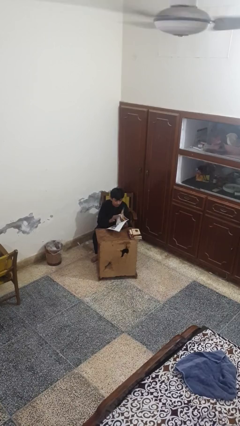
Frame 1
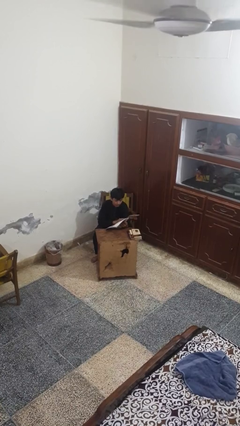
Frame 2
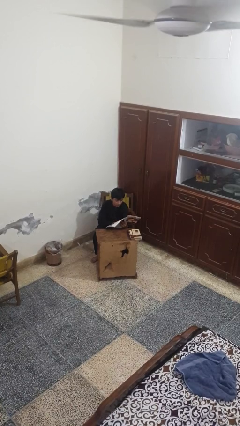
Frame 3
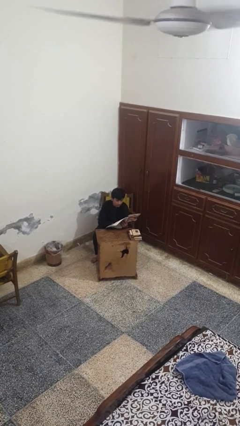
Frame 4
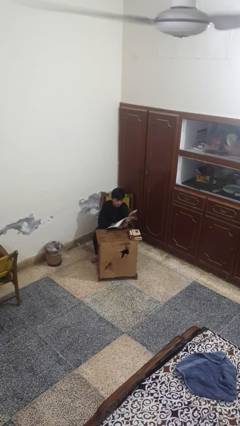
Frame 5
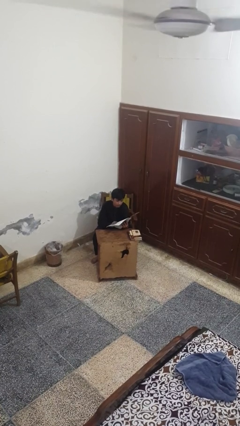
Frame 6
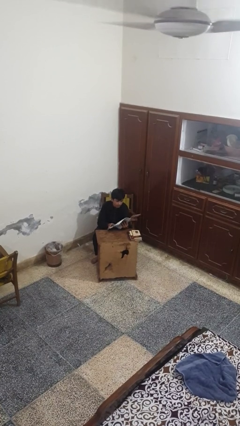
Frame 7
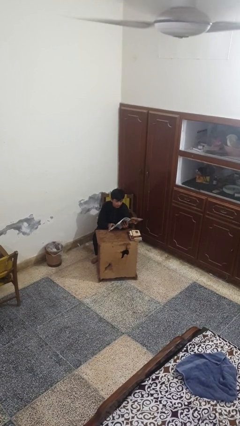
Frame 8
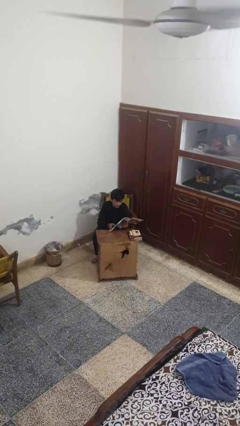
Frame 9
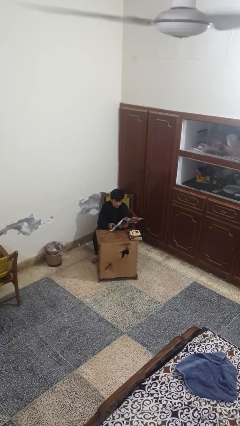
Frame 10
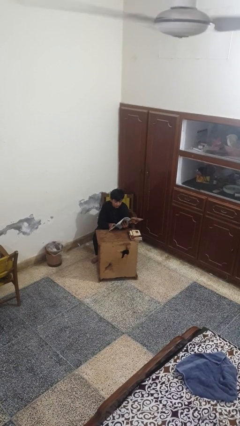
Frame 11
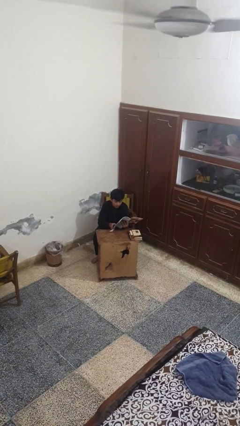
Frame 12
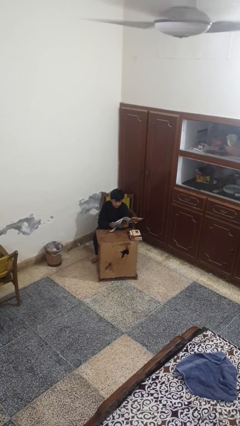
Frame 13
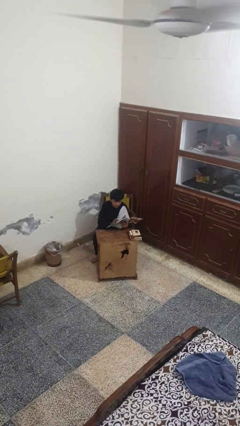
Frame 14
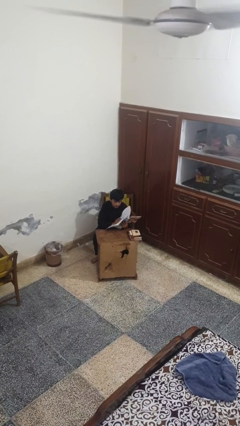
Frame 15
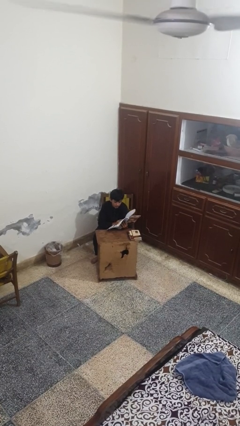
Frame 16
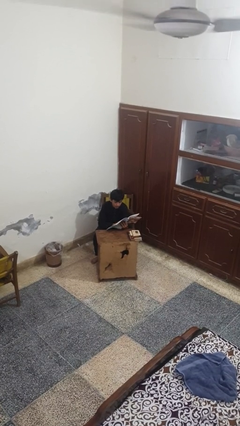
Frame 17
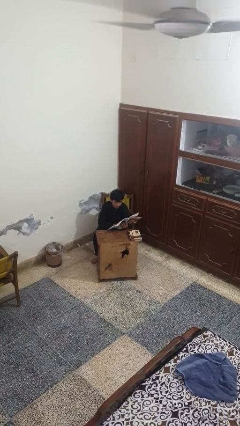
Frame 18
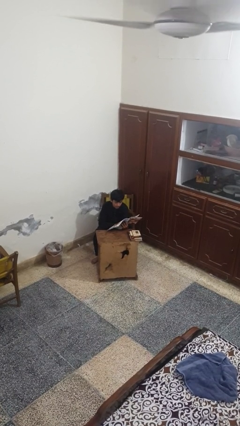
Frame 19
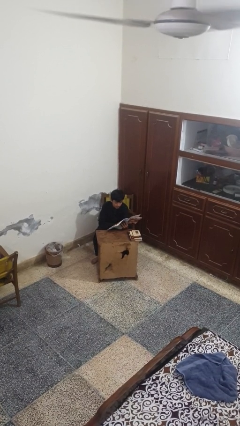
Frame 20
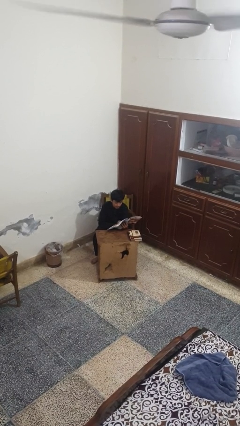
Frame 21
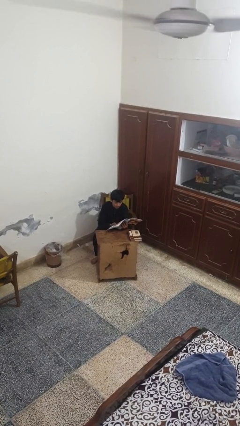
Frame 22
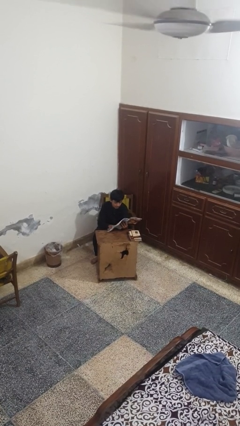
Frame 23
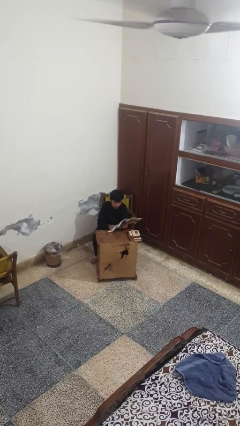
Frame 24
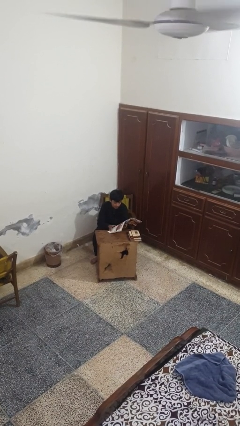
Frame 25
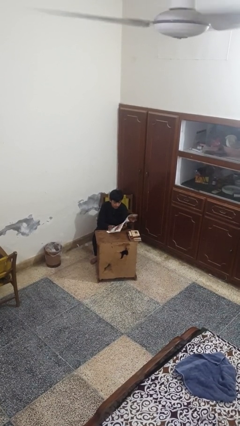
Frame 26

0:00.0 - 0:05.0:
person reads magazine

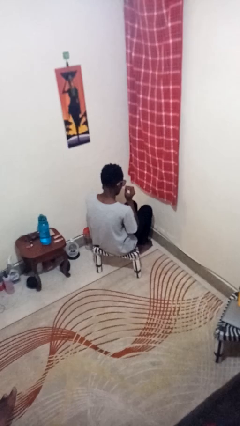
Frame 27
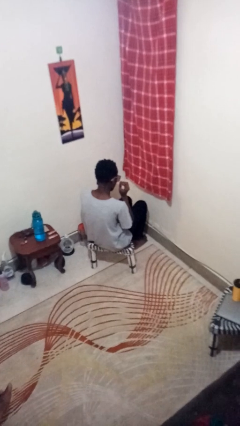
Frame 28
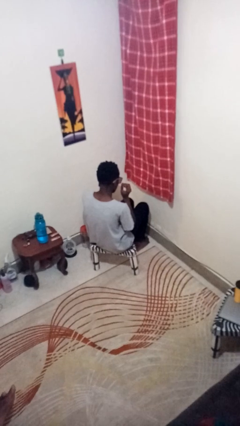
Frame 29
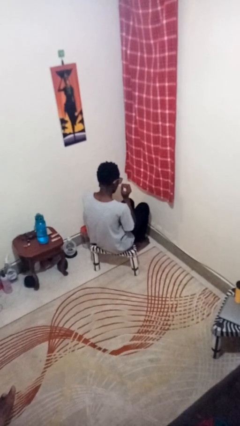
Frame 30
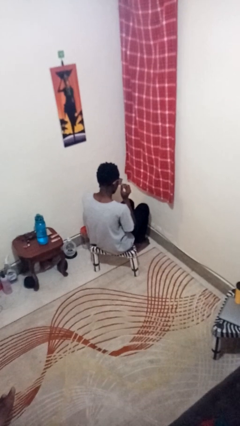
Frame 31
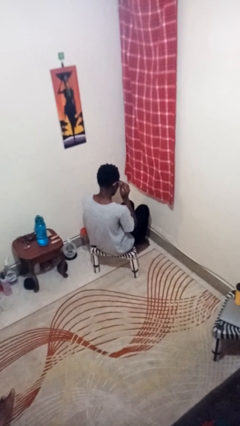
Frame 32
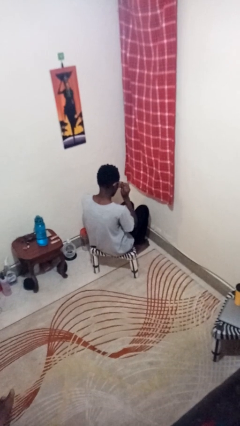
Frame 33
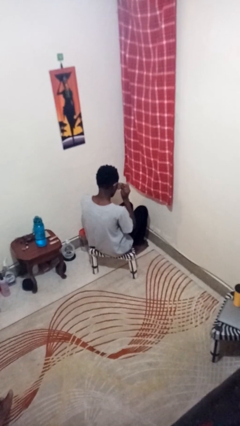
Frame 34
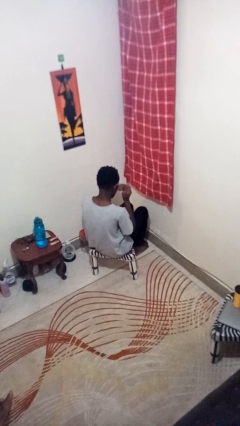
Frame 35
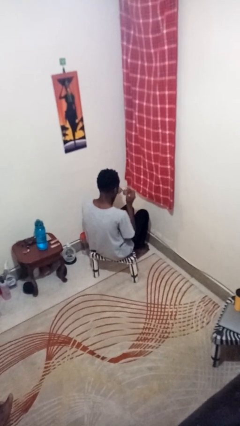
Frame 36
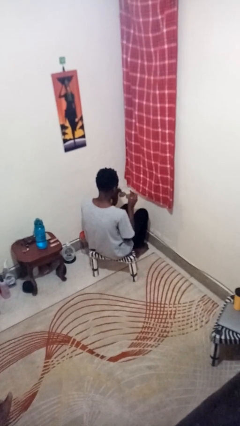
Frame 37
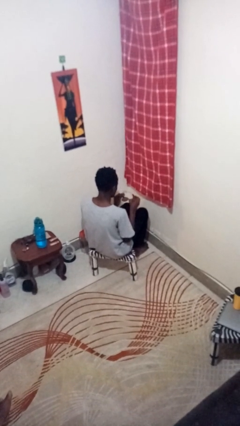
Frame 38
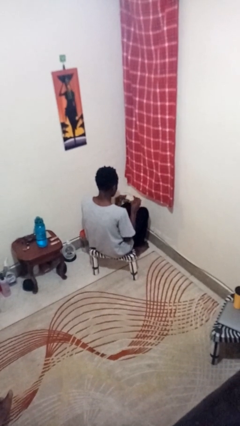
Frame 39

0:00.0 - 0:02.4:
person takes off glasses

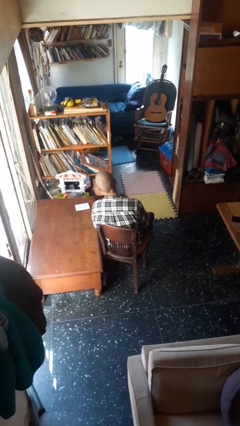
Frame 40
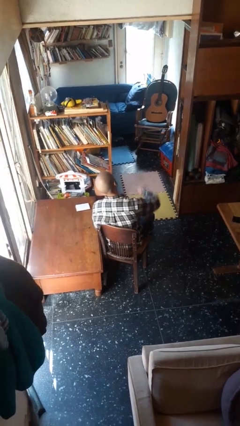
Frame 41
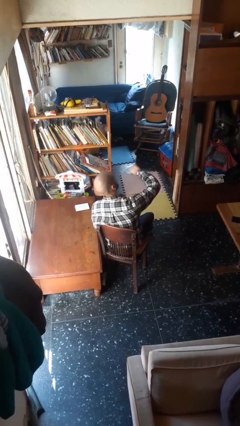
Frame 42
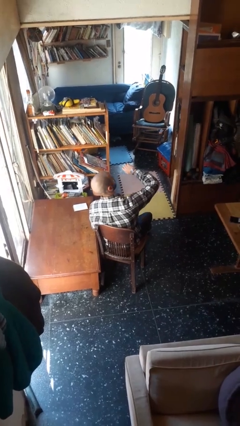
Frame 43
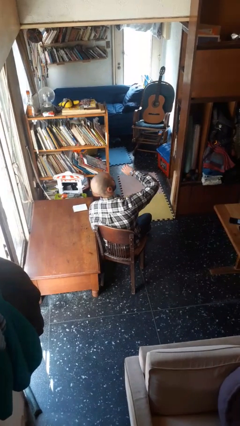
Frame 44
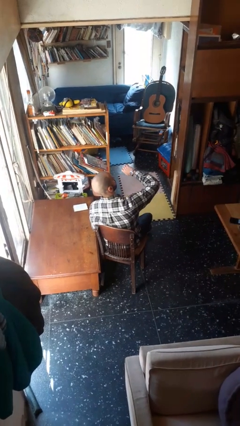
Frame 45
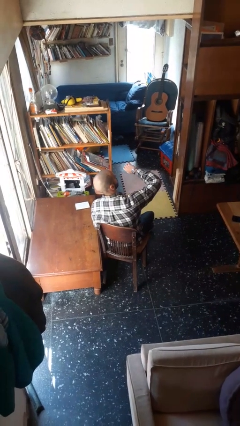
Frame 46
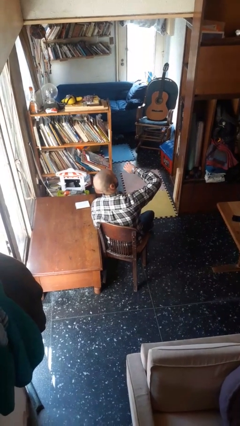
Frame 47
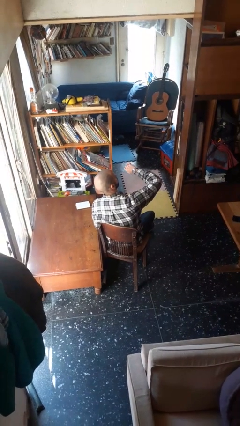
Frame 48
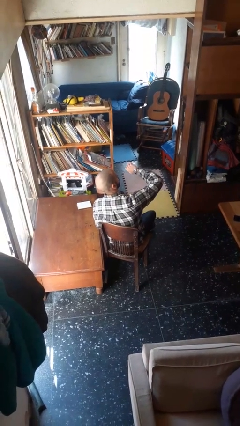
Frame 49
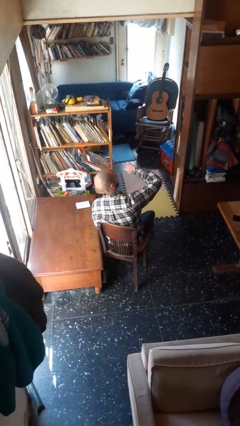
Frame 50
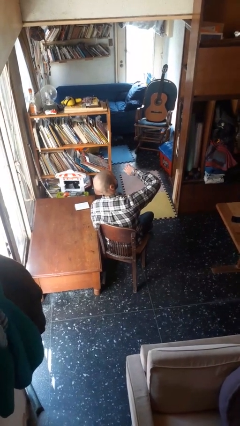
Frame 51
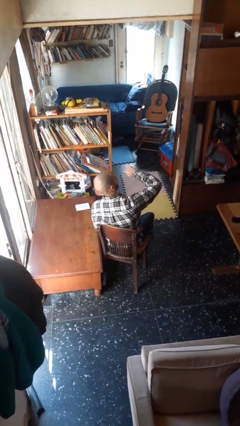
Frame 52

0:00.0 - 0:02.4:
person looks at wristwatch

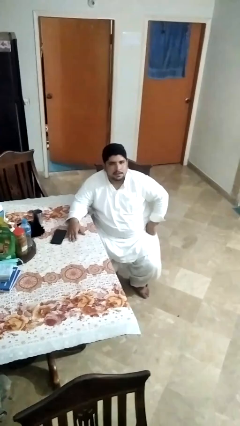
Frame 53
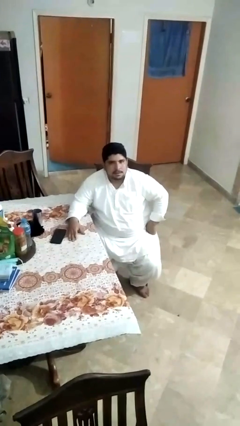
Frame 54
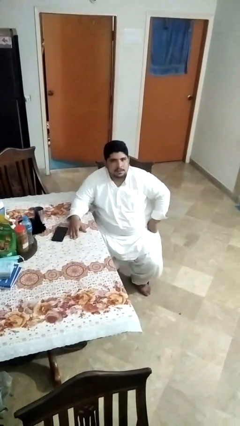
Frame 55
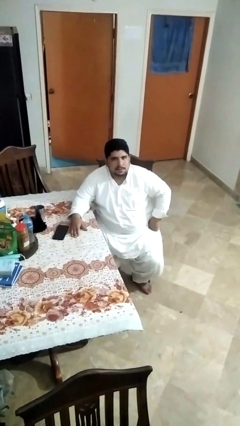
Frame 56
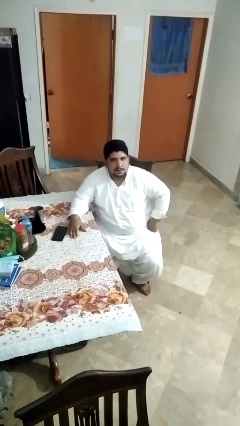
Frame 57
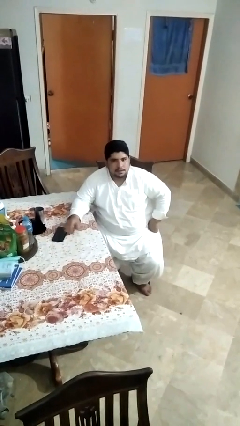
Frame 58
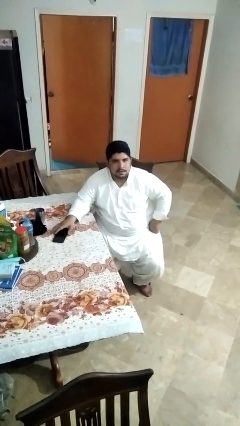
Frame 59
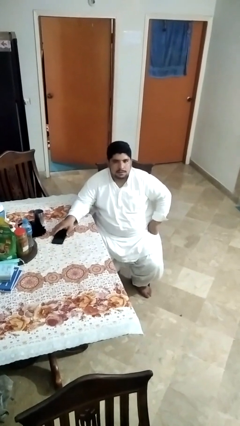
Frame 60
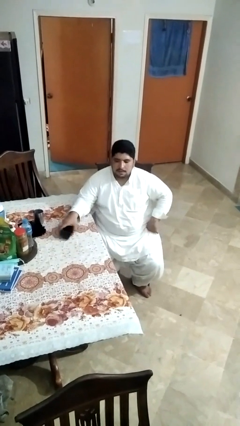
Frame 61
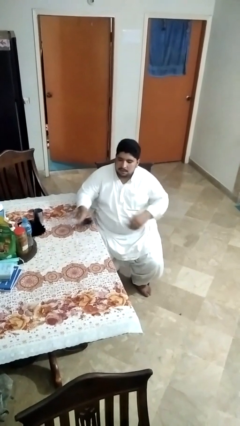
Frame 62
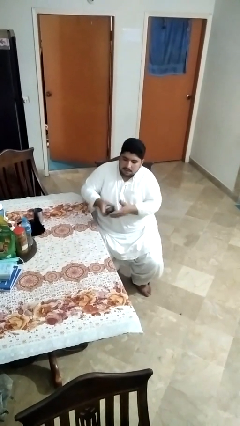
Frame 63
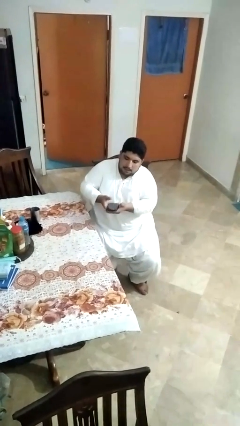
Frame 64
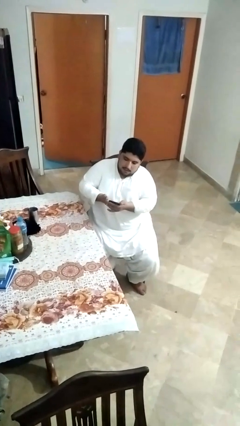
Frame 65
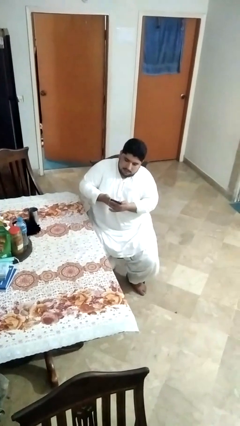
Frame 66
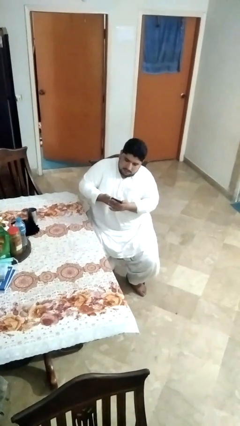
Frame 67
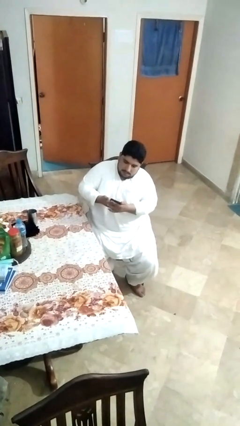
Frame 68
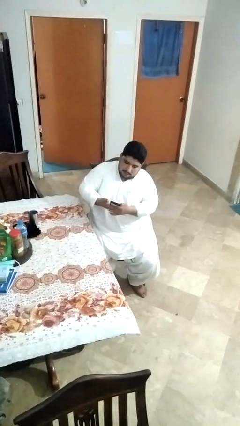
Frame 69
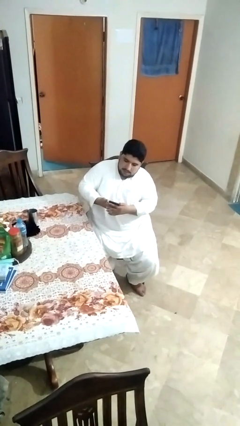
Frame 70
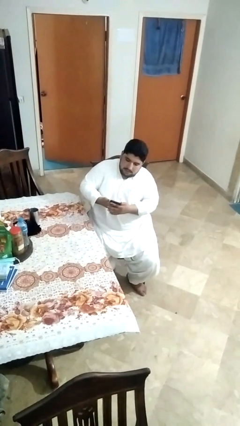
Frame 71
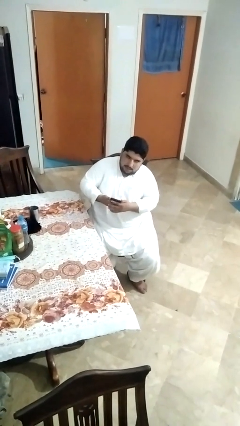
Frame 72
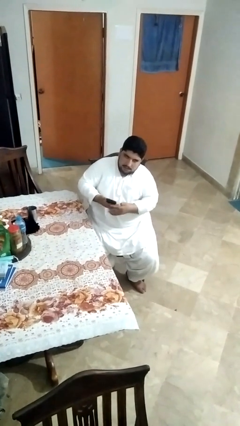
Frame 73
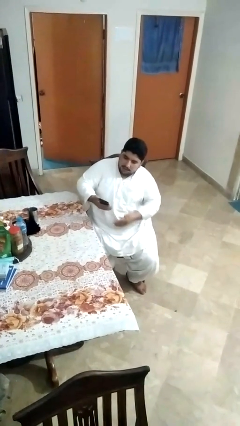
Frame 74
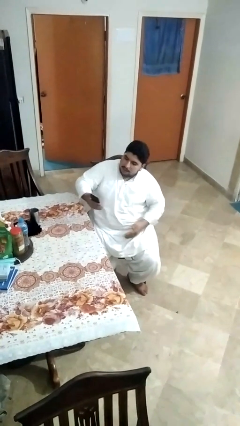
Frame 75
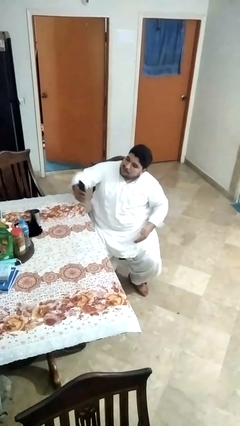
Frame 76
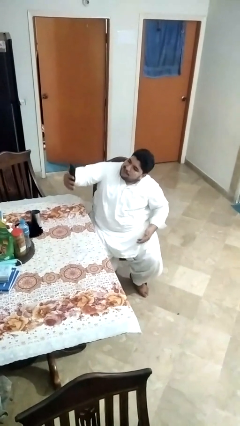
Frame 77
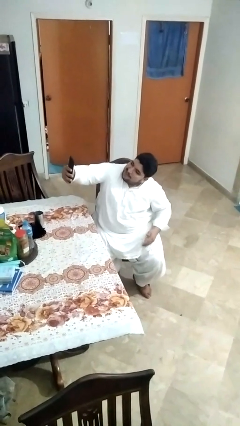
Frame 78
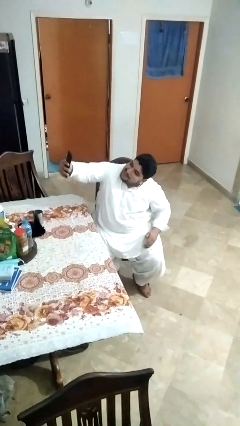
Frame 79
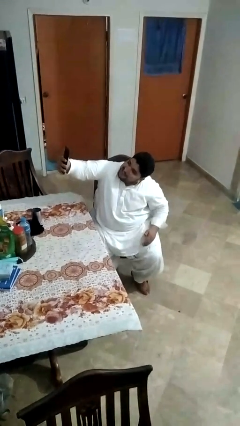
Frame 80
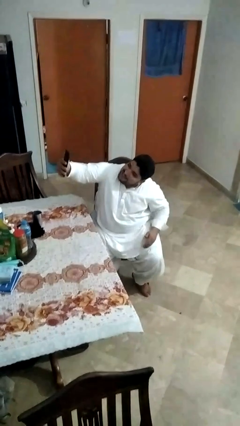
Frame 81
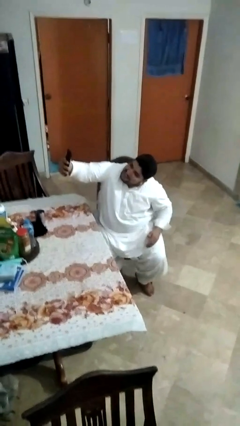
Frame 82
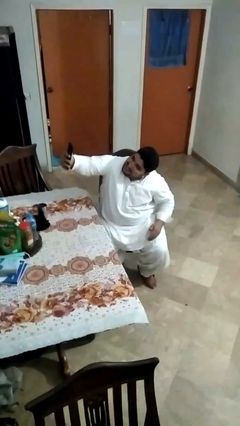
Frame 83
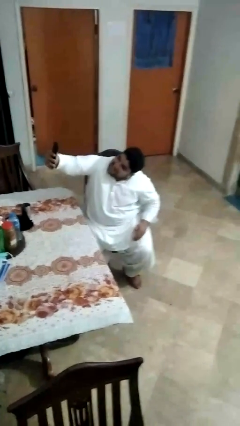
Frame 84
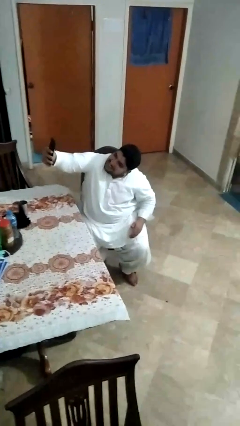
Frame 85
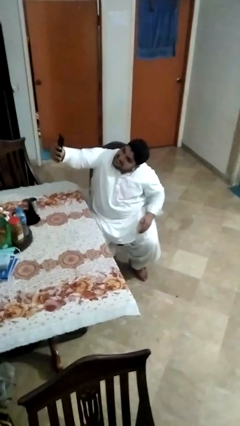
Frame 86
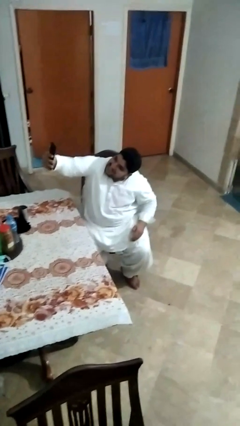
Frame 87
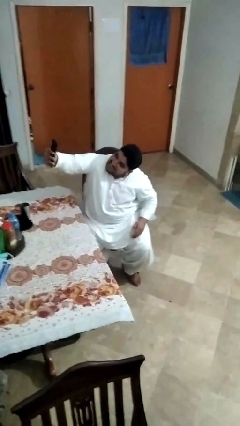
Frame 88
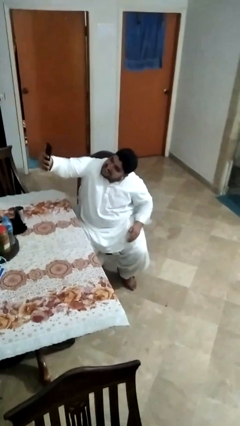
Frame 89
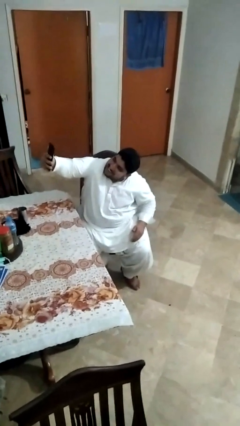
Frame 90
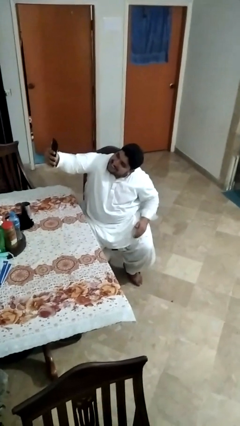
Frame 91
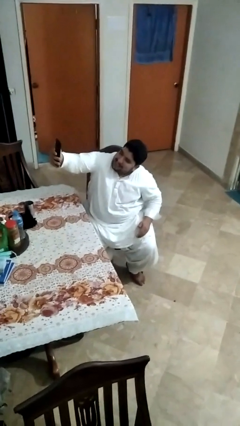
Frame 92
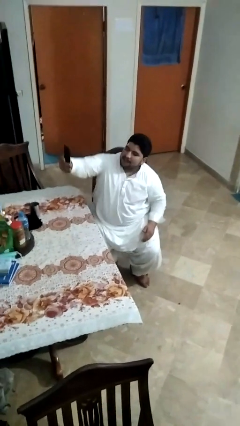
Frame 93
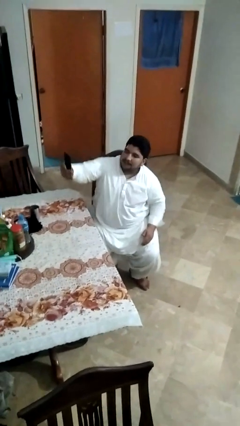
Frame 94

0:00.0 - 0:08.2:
person takes selfie

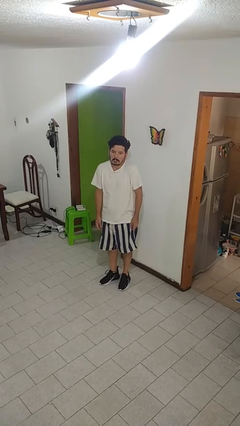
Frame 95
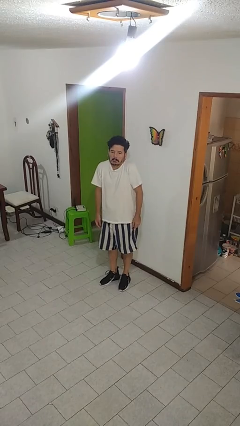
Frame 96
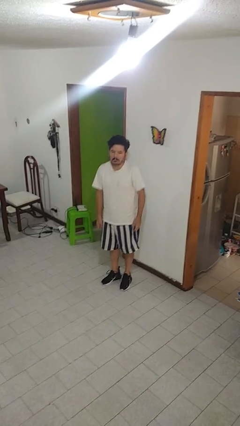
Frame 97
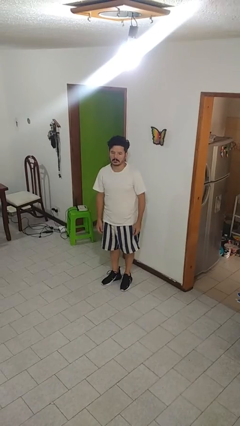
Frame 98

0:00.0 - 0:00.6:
person shrugs
